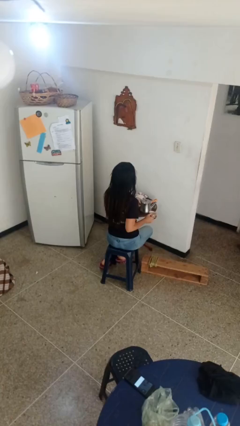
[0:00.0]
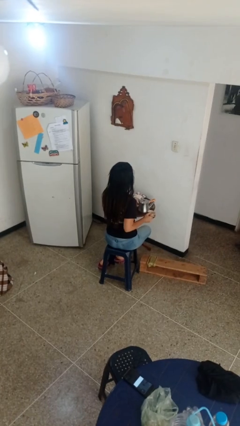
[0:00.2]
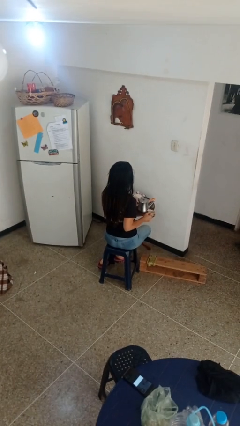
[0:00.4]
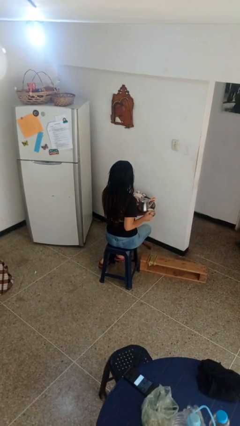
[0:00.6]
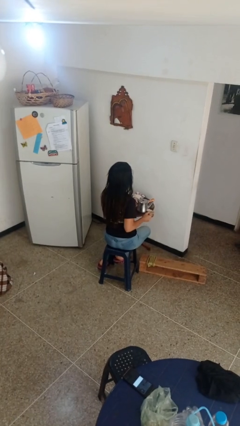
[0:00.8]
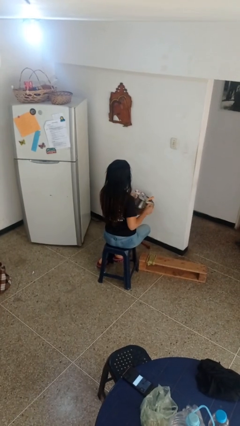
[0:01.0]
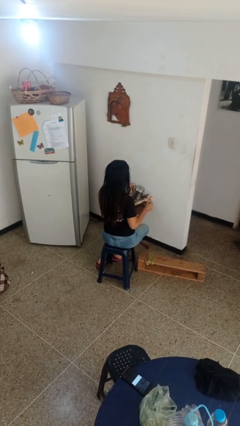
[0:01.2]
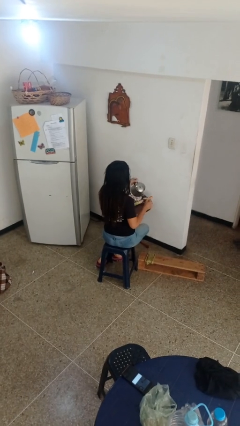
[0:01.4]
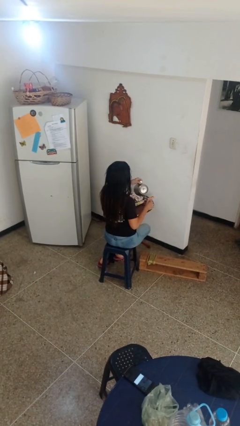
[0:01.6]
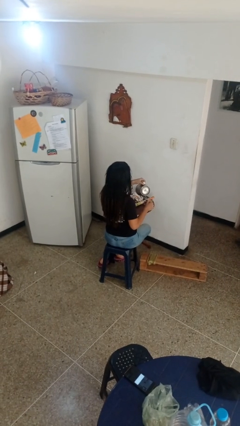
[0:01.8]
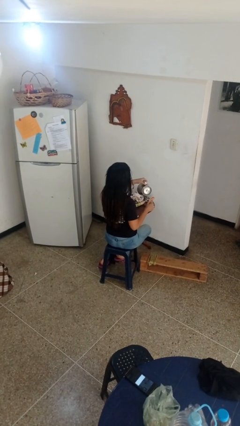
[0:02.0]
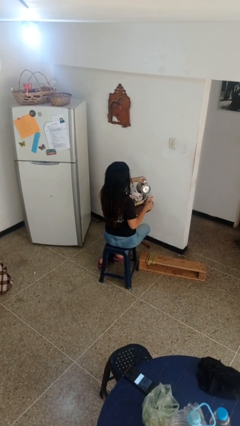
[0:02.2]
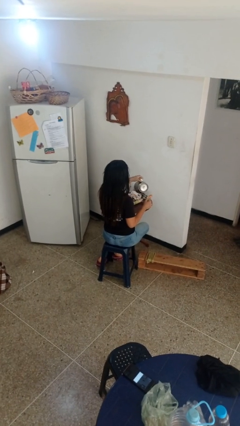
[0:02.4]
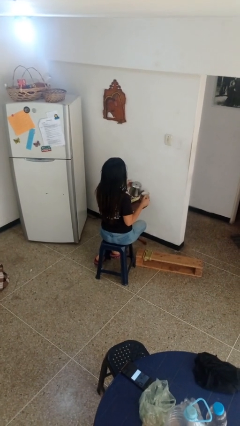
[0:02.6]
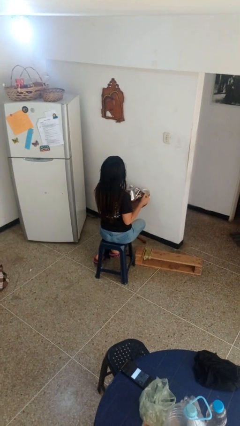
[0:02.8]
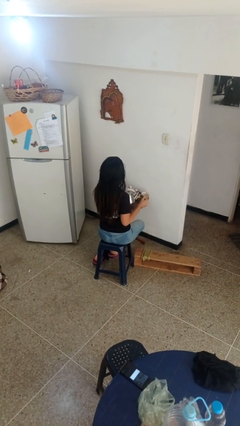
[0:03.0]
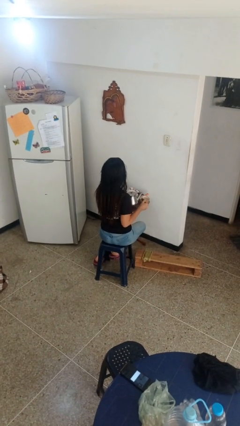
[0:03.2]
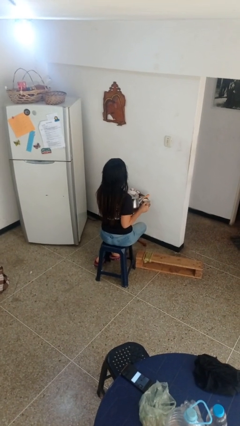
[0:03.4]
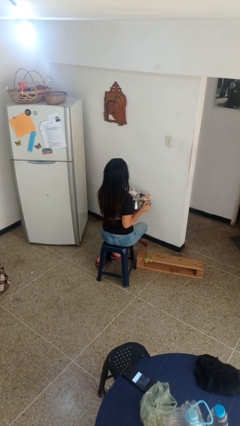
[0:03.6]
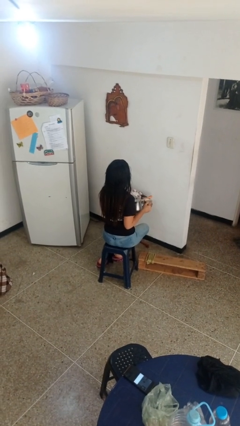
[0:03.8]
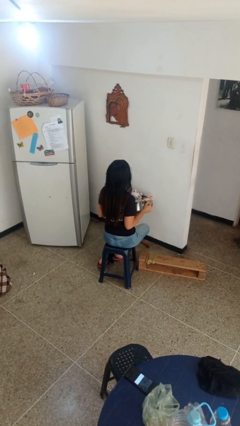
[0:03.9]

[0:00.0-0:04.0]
person pours coffee into mug

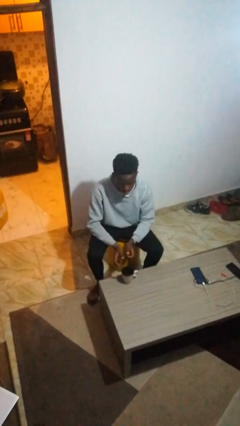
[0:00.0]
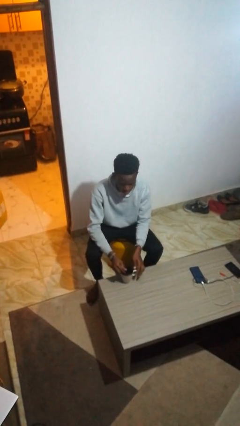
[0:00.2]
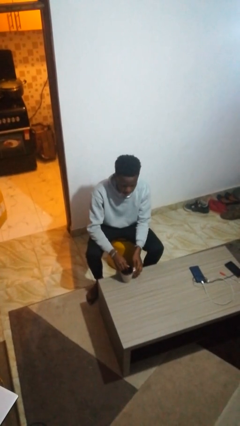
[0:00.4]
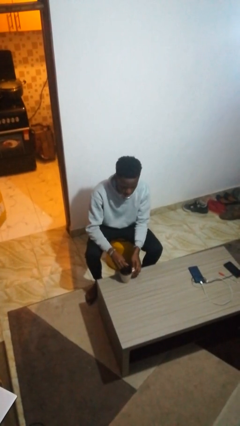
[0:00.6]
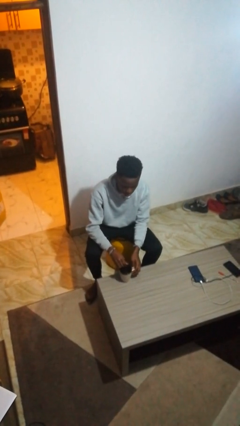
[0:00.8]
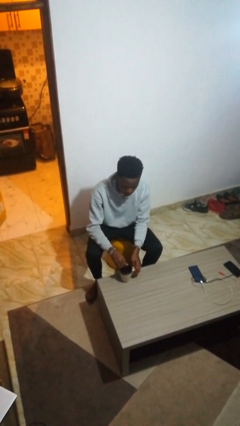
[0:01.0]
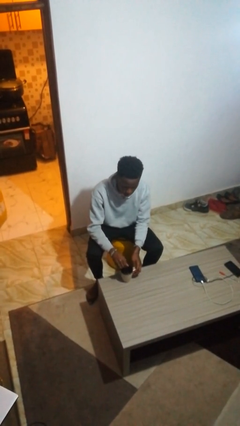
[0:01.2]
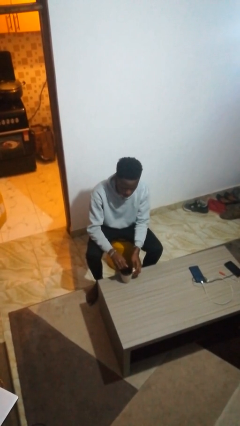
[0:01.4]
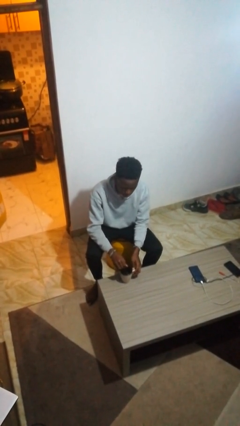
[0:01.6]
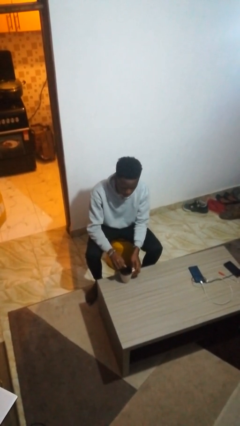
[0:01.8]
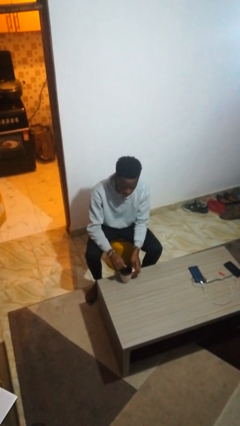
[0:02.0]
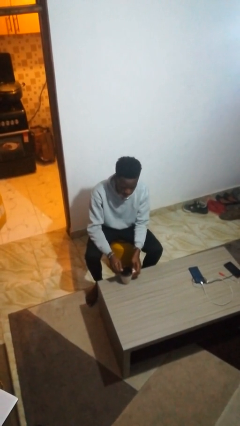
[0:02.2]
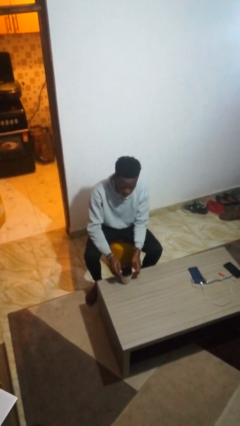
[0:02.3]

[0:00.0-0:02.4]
person stirs mug

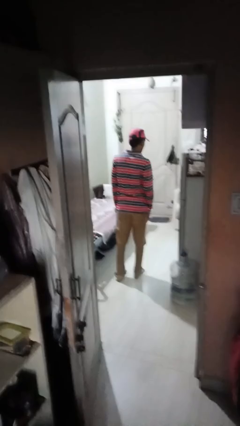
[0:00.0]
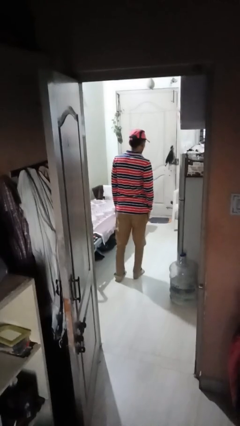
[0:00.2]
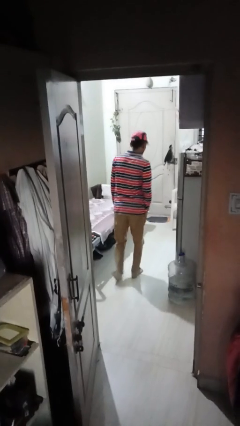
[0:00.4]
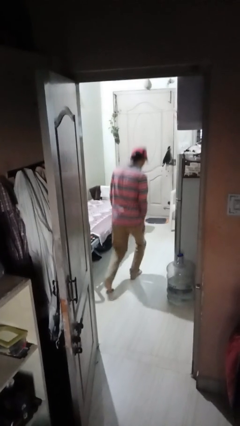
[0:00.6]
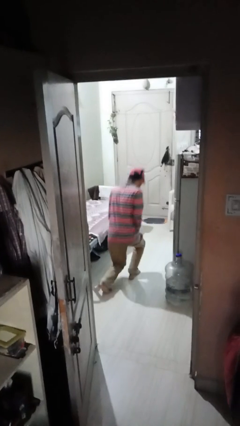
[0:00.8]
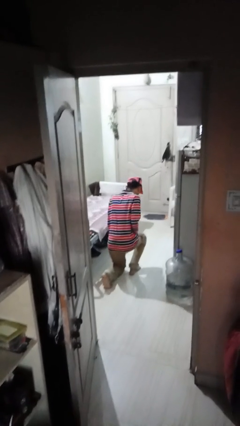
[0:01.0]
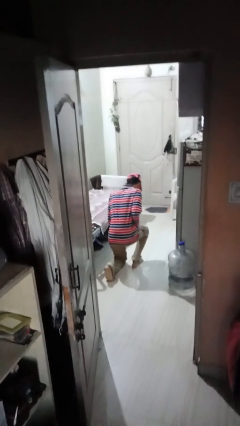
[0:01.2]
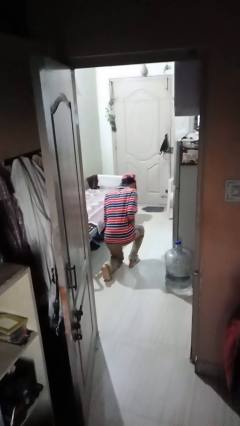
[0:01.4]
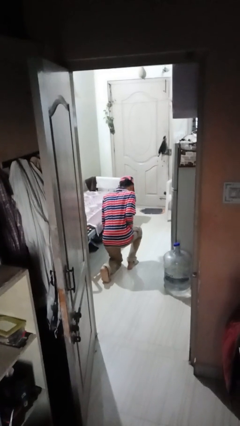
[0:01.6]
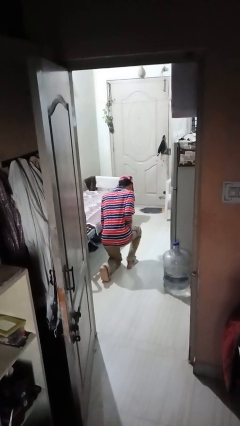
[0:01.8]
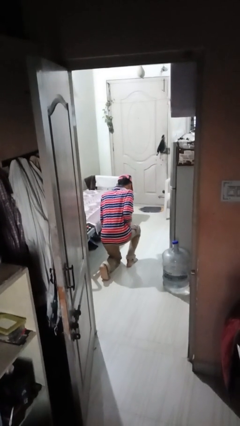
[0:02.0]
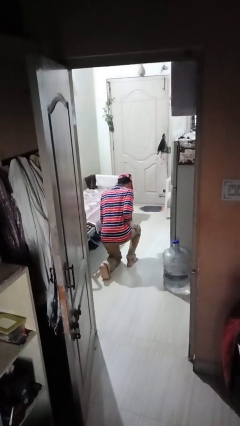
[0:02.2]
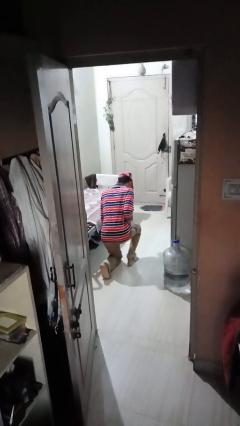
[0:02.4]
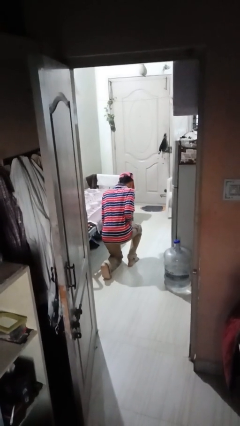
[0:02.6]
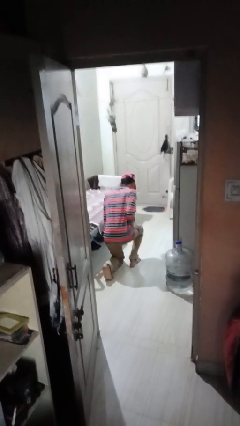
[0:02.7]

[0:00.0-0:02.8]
person kneels

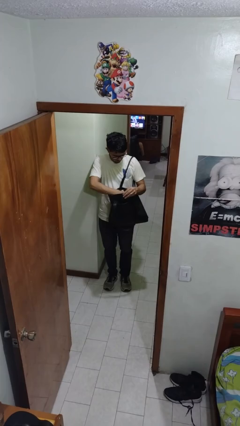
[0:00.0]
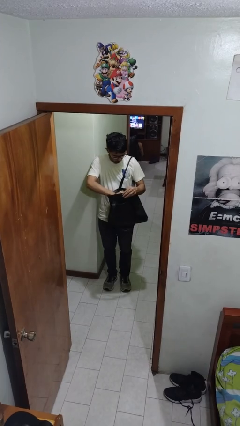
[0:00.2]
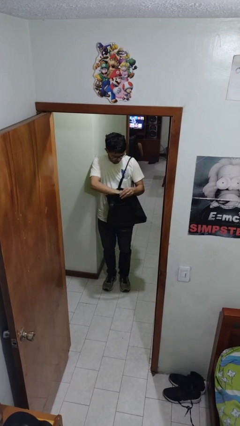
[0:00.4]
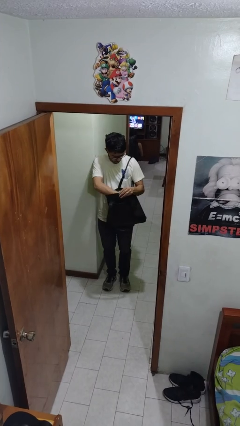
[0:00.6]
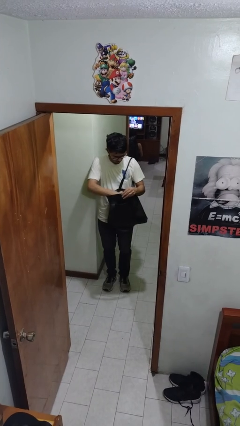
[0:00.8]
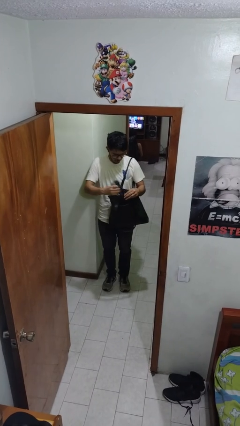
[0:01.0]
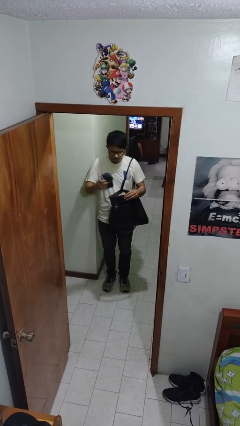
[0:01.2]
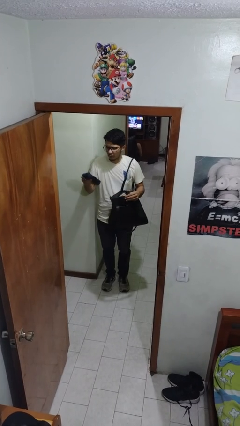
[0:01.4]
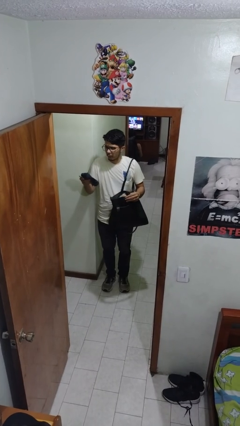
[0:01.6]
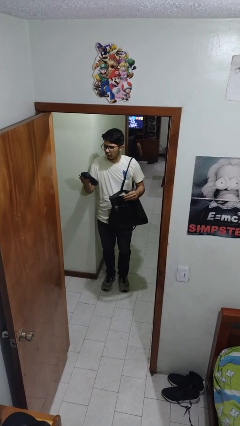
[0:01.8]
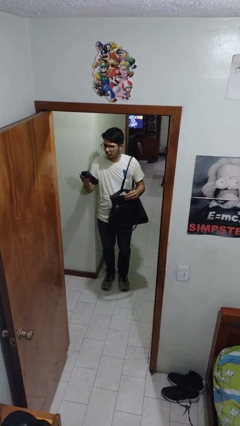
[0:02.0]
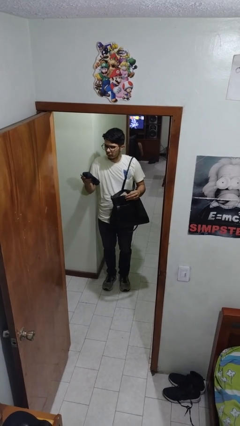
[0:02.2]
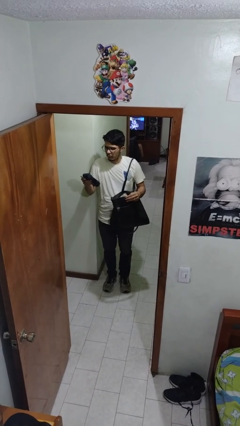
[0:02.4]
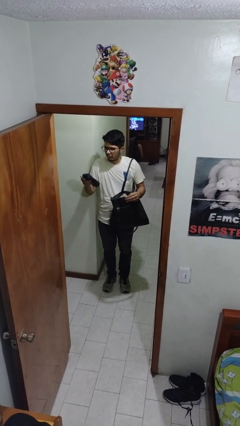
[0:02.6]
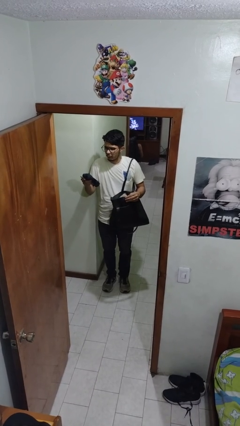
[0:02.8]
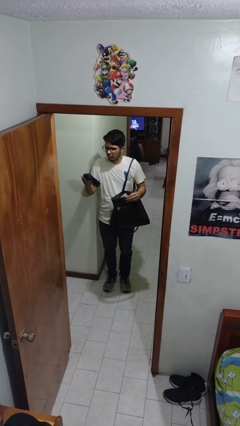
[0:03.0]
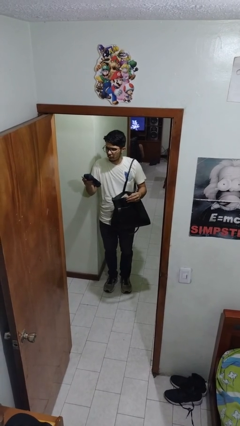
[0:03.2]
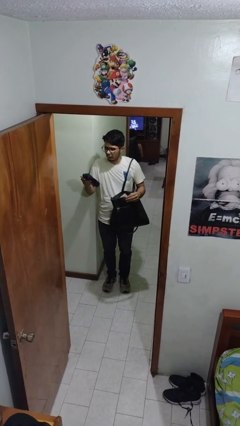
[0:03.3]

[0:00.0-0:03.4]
person takes object from purse

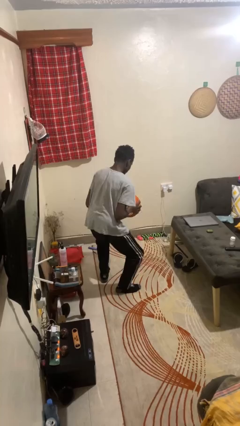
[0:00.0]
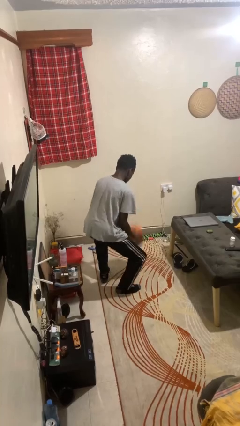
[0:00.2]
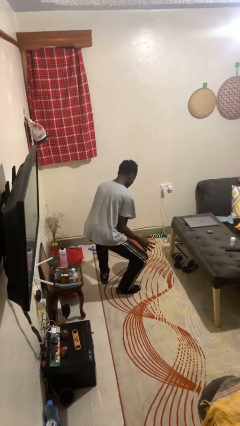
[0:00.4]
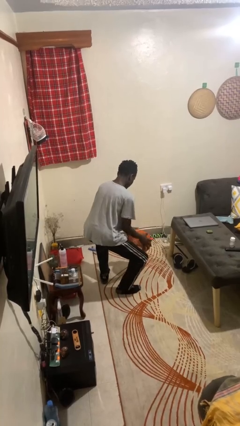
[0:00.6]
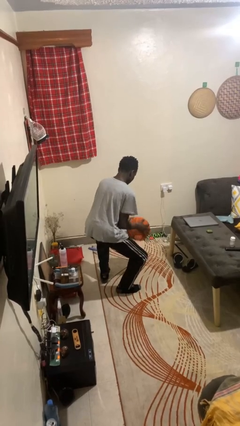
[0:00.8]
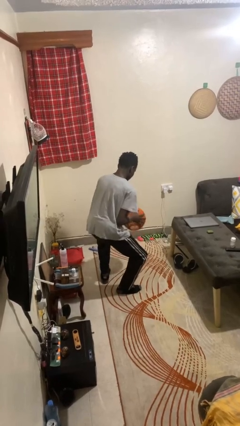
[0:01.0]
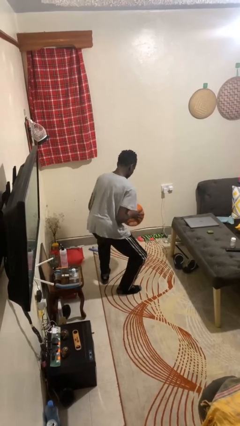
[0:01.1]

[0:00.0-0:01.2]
person bounces ball on floor

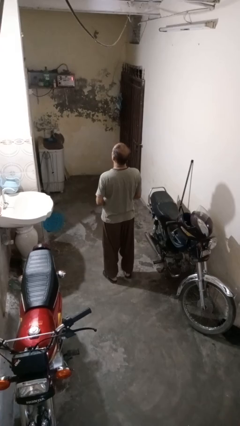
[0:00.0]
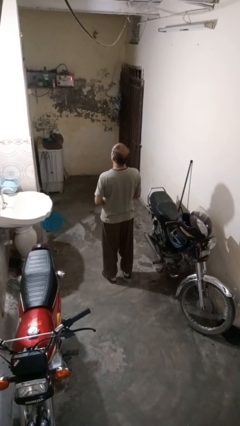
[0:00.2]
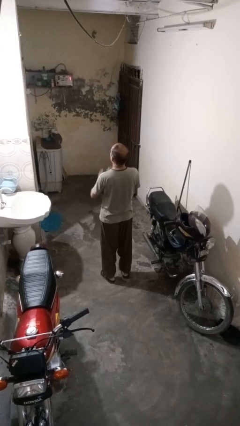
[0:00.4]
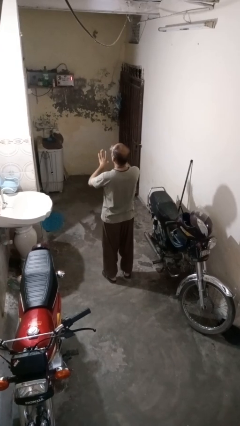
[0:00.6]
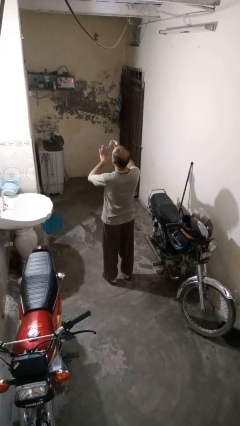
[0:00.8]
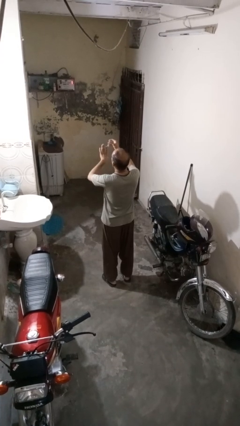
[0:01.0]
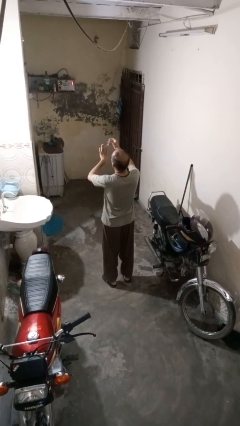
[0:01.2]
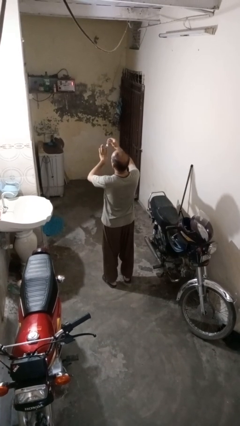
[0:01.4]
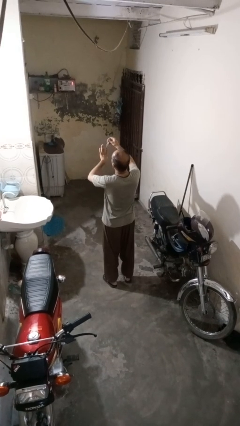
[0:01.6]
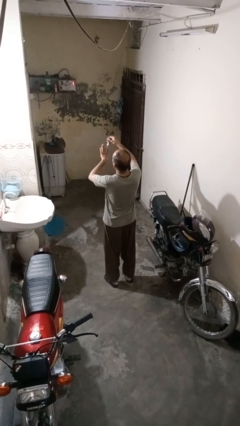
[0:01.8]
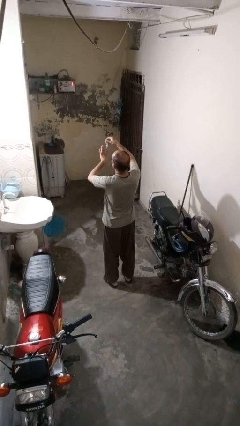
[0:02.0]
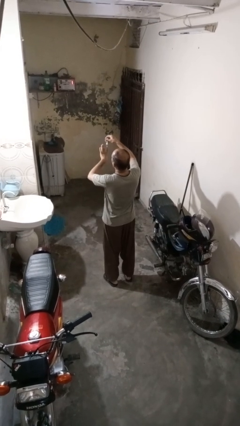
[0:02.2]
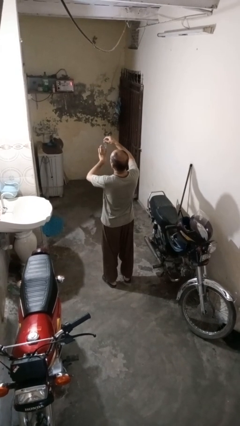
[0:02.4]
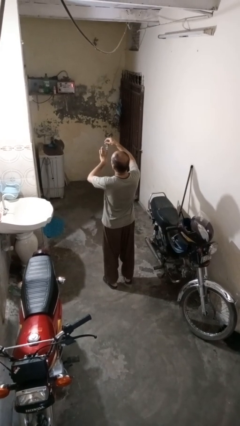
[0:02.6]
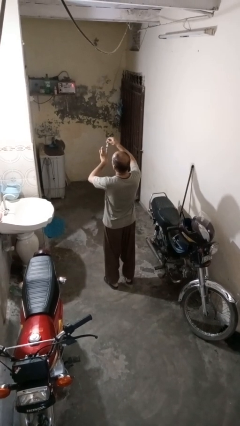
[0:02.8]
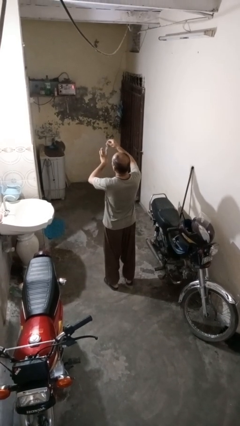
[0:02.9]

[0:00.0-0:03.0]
person clips fingernails

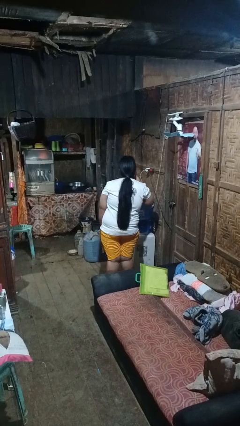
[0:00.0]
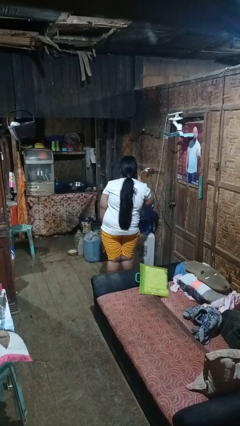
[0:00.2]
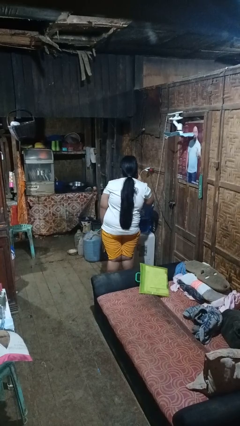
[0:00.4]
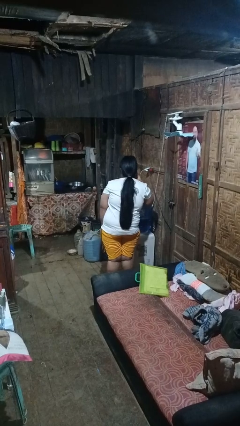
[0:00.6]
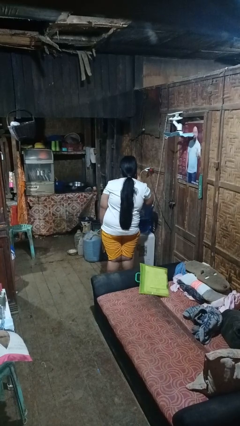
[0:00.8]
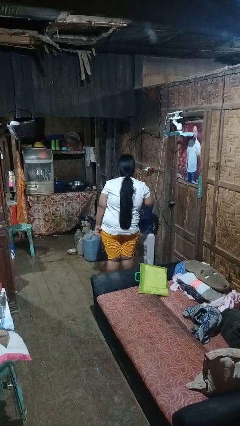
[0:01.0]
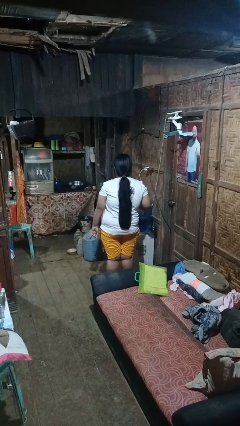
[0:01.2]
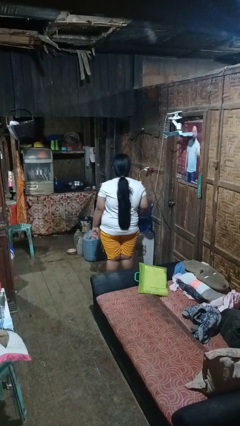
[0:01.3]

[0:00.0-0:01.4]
person gestures listen closely
